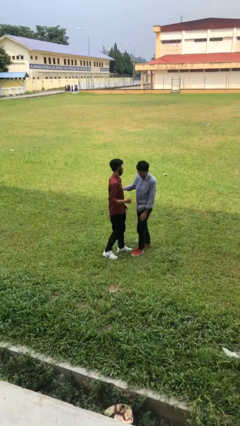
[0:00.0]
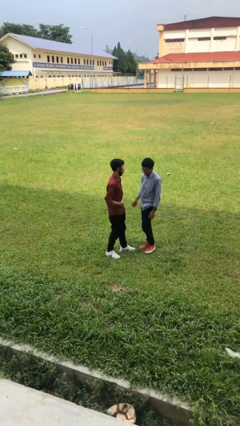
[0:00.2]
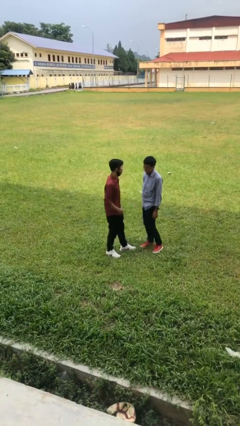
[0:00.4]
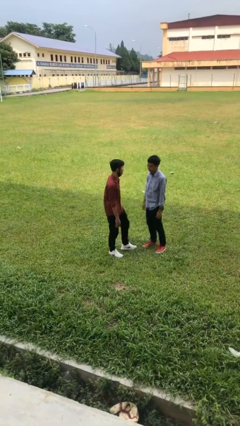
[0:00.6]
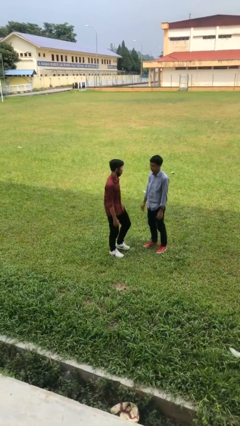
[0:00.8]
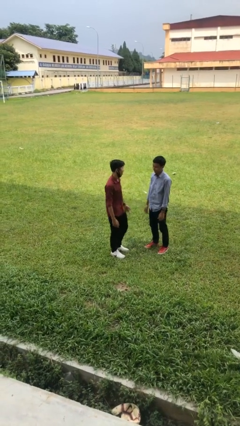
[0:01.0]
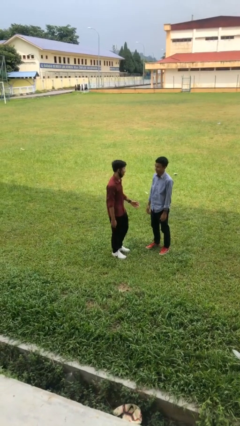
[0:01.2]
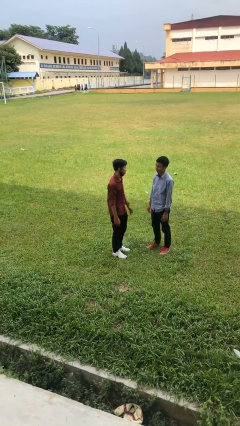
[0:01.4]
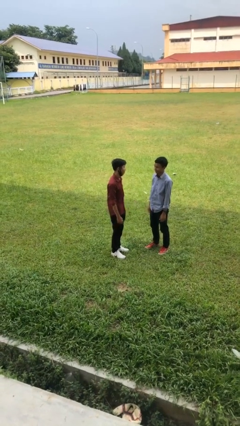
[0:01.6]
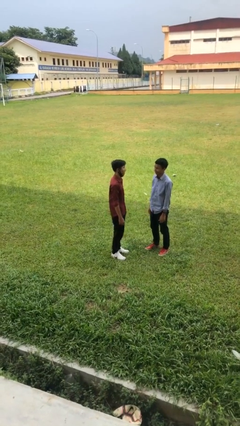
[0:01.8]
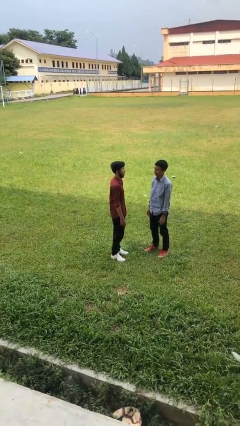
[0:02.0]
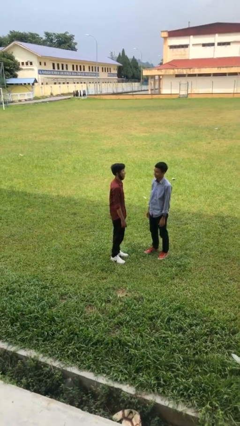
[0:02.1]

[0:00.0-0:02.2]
person talks to person

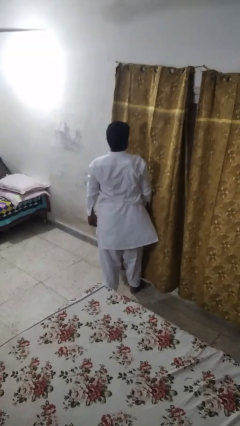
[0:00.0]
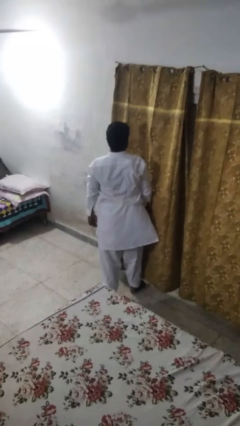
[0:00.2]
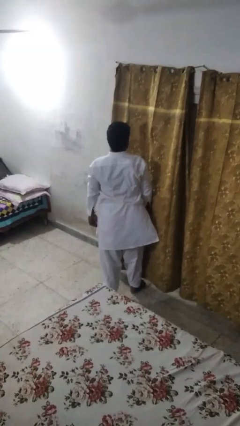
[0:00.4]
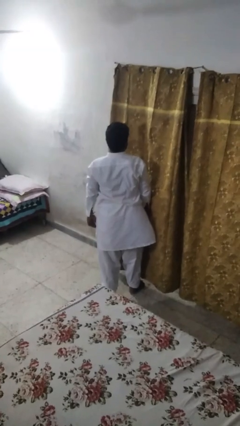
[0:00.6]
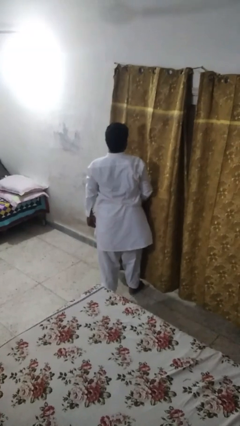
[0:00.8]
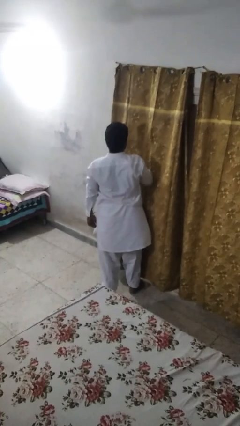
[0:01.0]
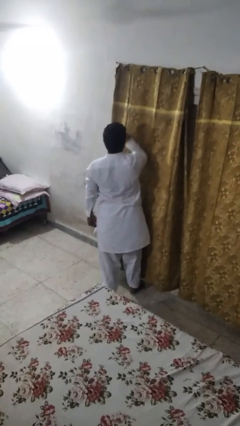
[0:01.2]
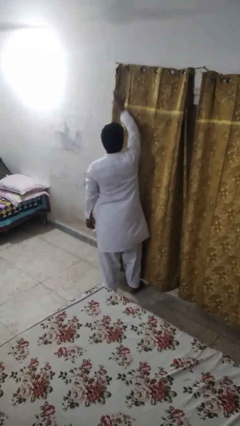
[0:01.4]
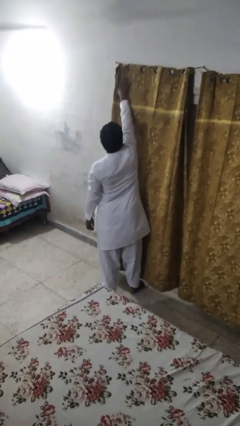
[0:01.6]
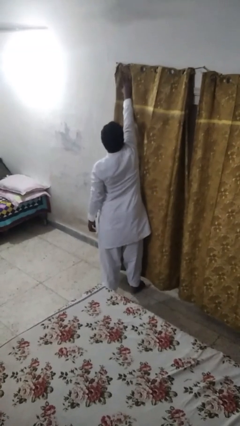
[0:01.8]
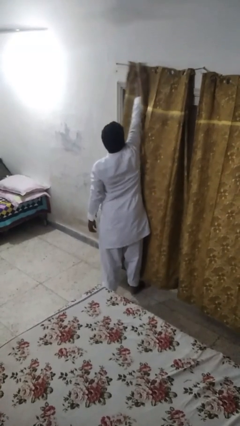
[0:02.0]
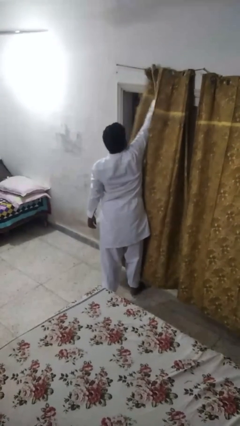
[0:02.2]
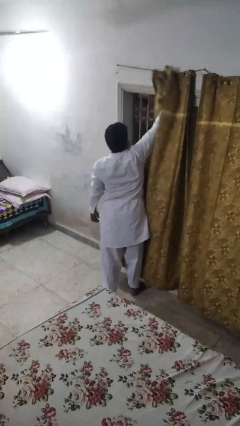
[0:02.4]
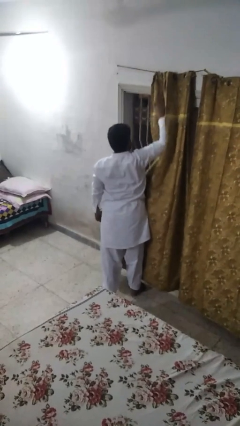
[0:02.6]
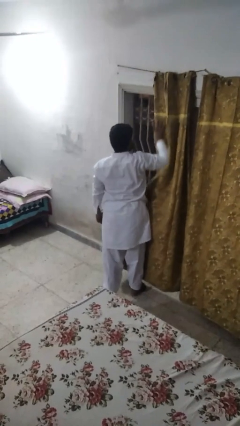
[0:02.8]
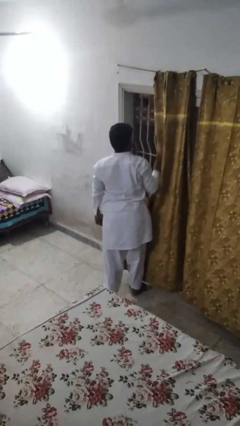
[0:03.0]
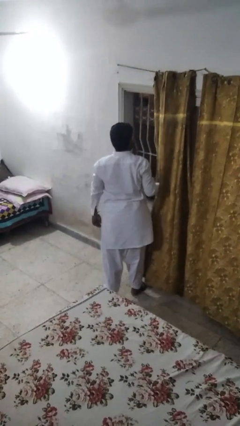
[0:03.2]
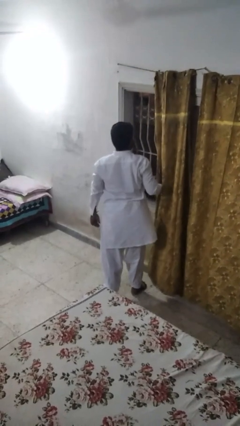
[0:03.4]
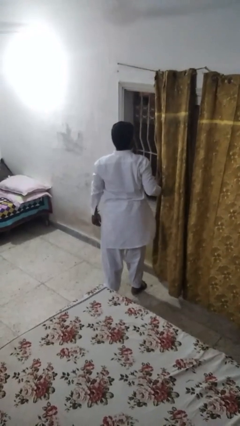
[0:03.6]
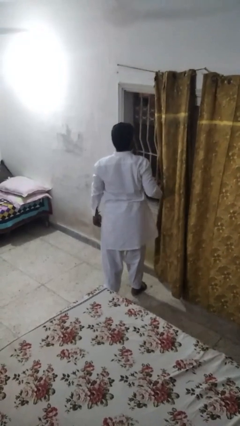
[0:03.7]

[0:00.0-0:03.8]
person opens curtains

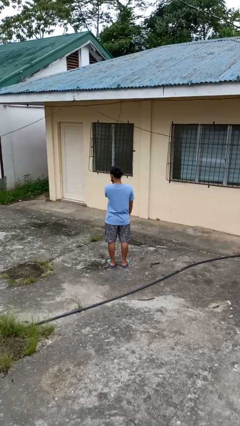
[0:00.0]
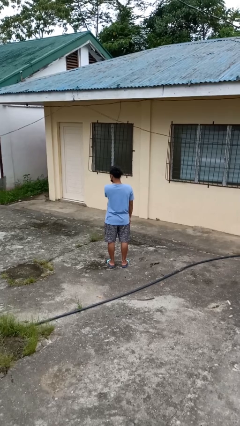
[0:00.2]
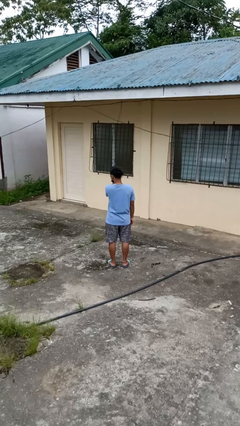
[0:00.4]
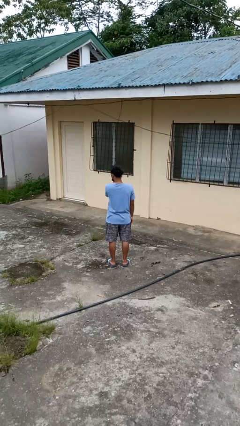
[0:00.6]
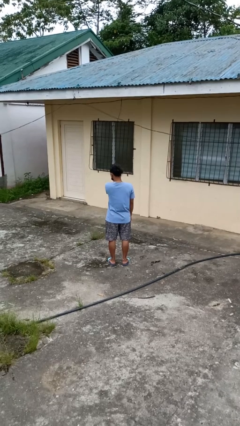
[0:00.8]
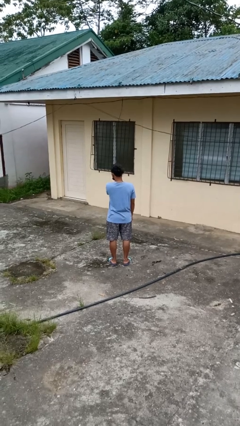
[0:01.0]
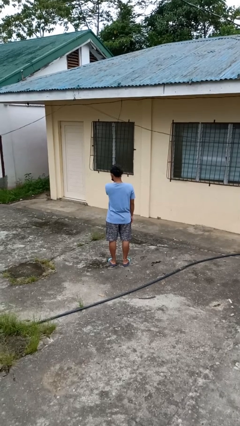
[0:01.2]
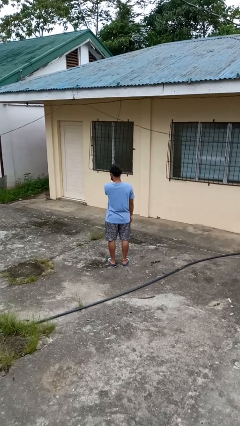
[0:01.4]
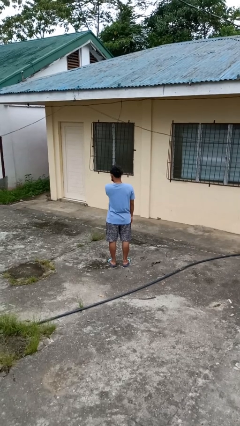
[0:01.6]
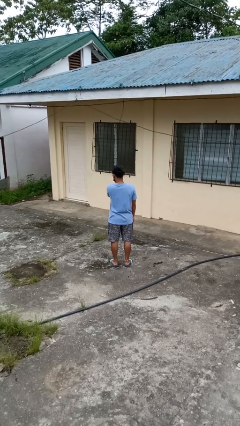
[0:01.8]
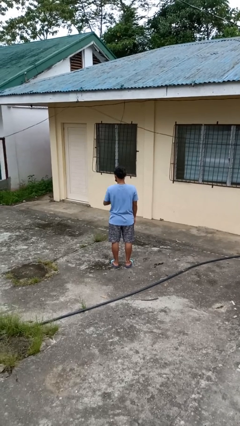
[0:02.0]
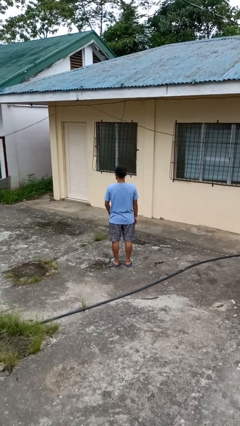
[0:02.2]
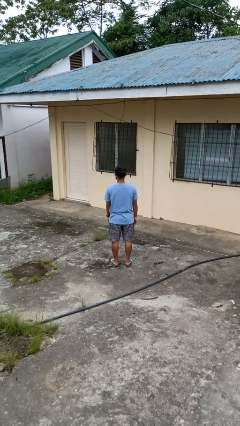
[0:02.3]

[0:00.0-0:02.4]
person scratches face

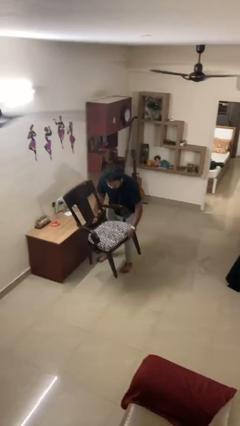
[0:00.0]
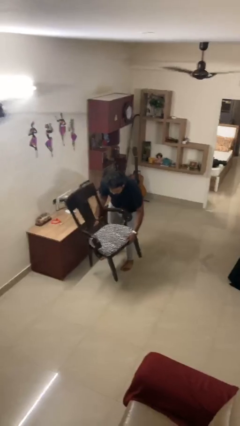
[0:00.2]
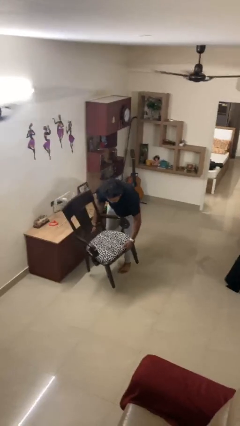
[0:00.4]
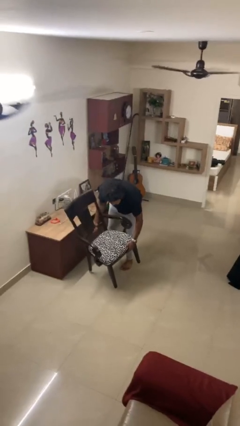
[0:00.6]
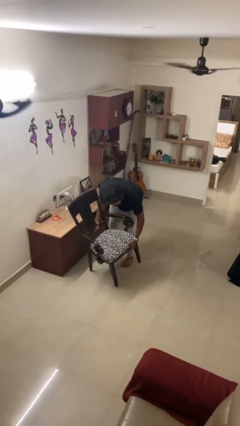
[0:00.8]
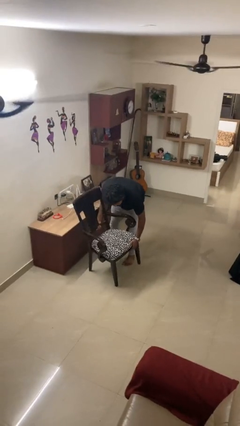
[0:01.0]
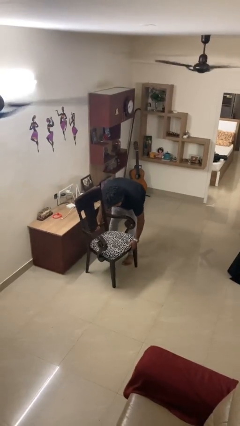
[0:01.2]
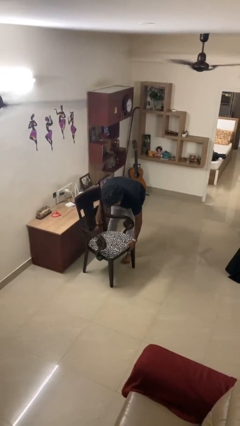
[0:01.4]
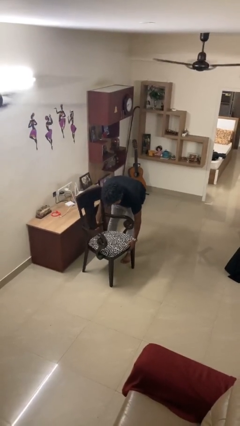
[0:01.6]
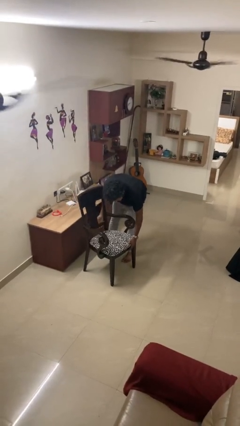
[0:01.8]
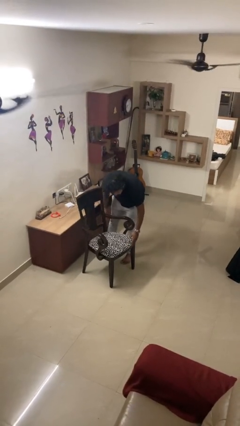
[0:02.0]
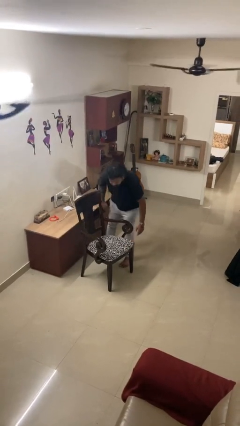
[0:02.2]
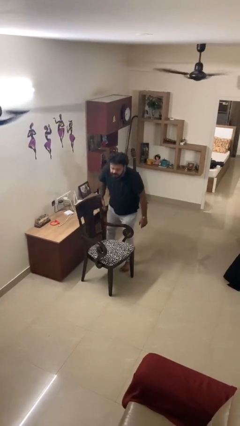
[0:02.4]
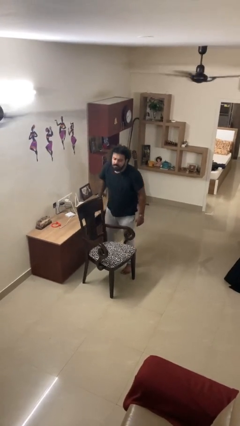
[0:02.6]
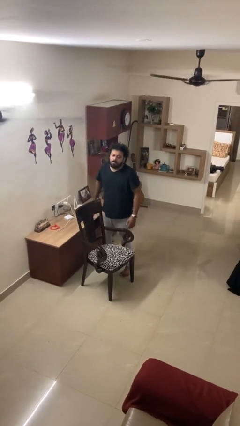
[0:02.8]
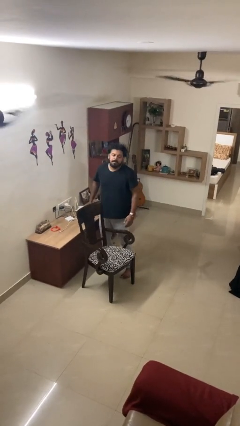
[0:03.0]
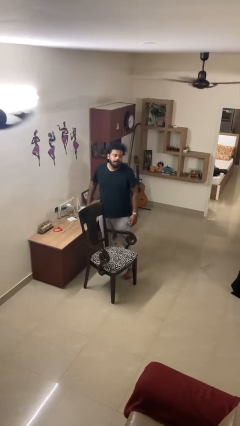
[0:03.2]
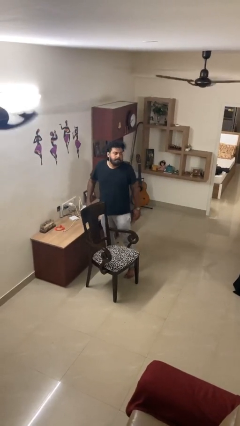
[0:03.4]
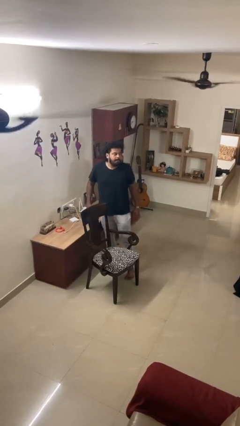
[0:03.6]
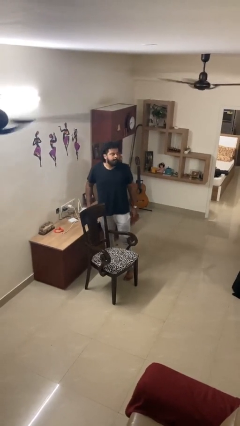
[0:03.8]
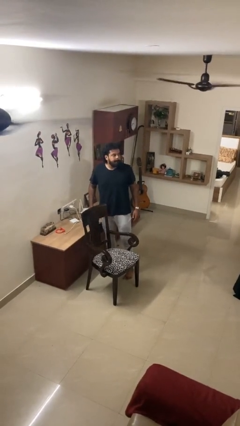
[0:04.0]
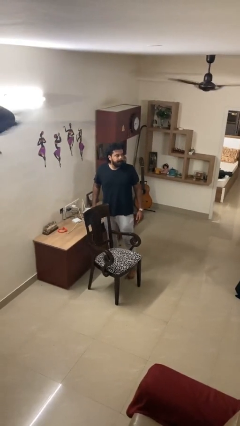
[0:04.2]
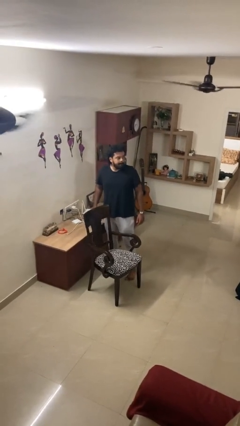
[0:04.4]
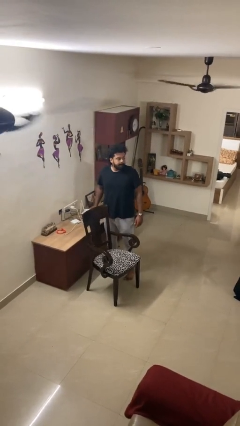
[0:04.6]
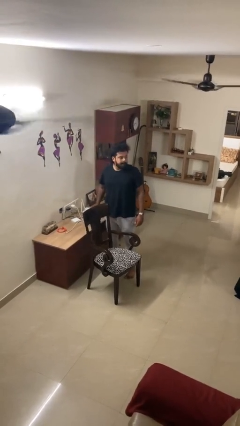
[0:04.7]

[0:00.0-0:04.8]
person puts down object on floor

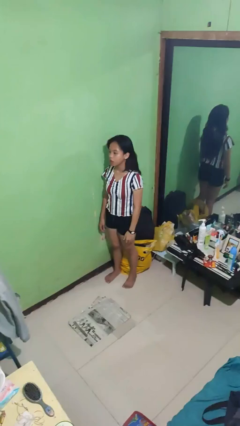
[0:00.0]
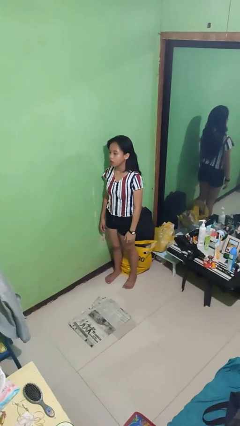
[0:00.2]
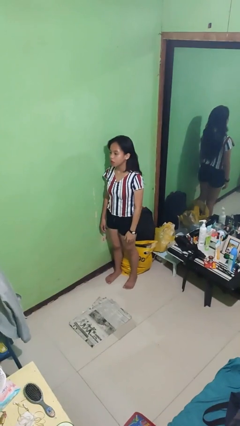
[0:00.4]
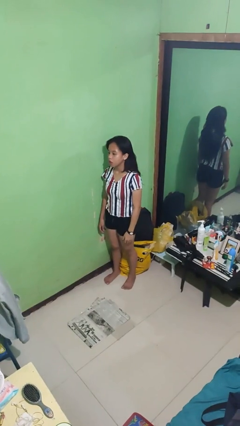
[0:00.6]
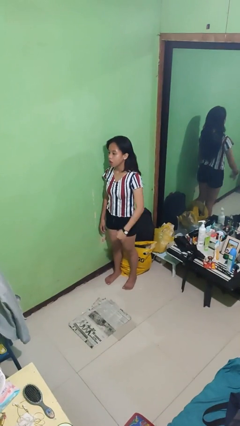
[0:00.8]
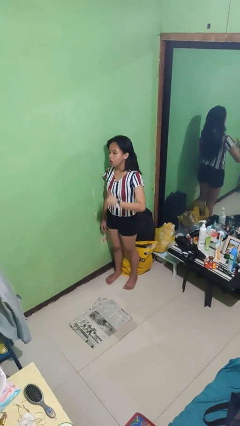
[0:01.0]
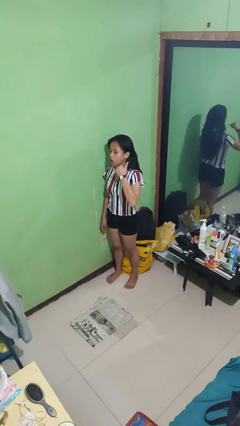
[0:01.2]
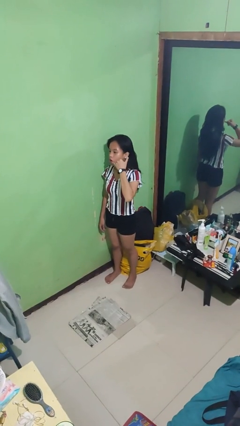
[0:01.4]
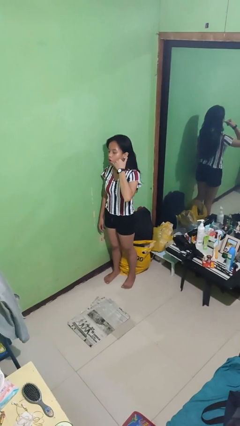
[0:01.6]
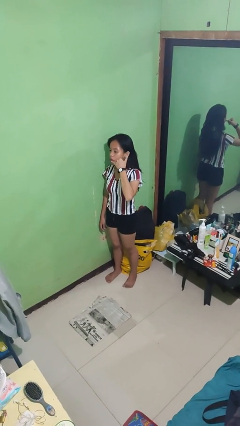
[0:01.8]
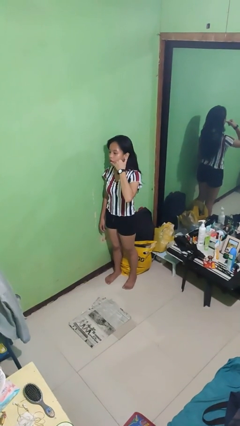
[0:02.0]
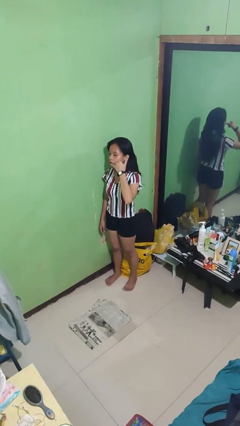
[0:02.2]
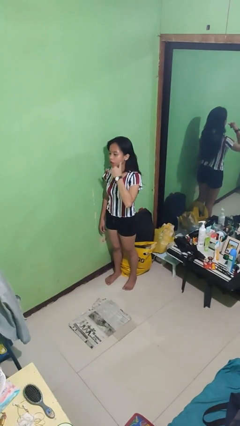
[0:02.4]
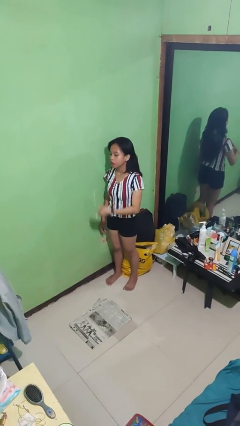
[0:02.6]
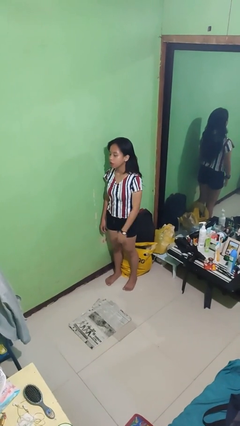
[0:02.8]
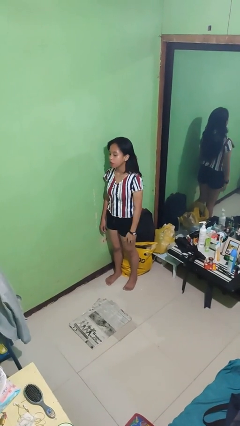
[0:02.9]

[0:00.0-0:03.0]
person gestures call me

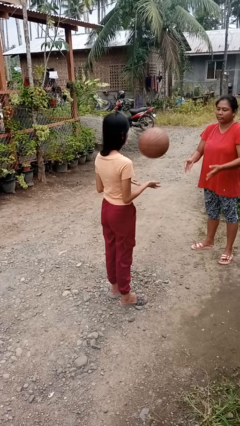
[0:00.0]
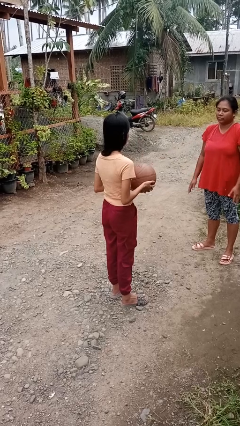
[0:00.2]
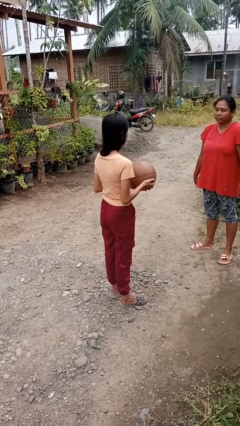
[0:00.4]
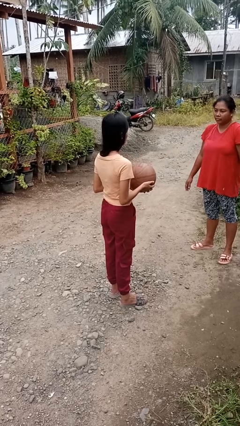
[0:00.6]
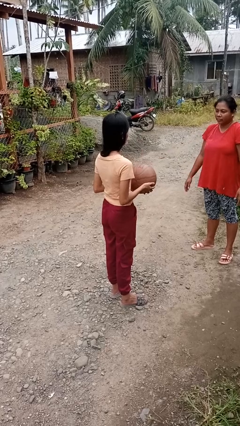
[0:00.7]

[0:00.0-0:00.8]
person catches object from person

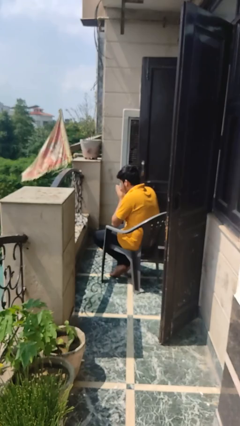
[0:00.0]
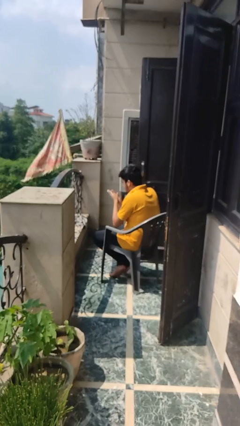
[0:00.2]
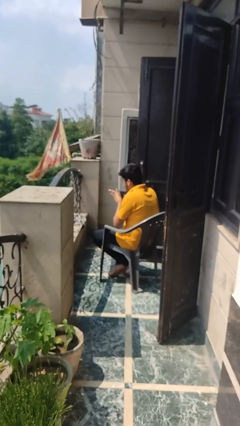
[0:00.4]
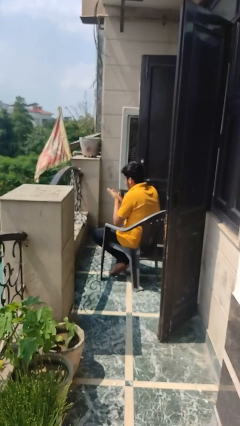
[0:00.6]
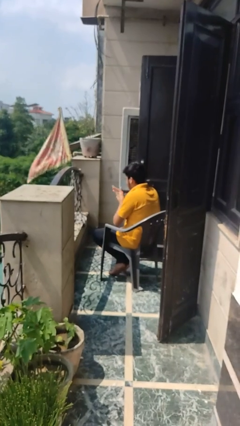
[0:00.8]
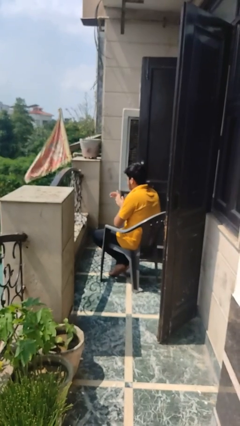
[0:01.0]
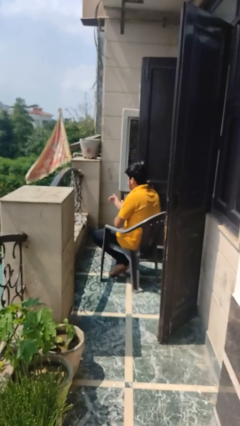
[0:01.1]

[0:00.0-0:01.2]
person blows into hands
